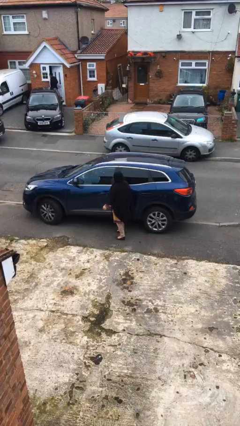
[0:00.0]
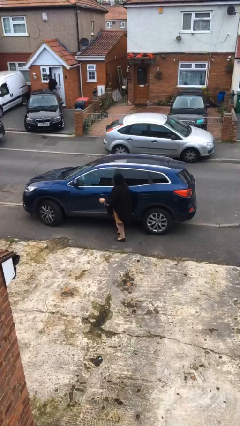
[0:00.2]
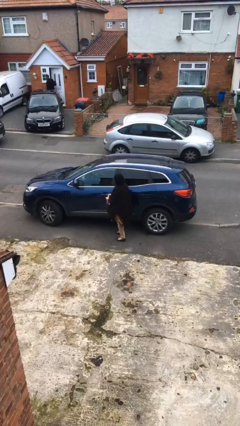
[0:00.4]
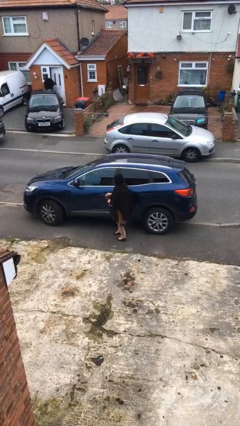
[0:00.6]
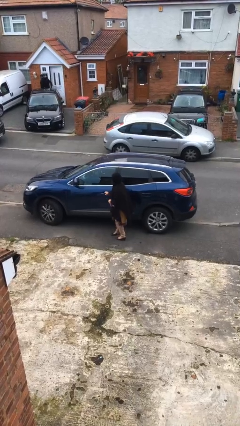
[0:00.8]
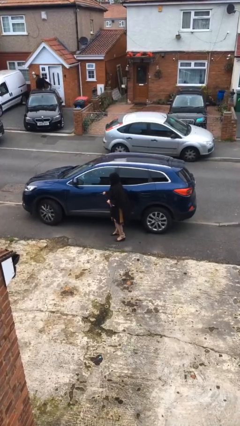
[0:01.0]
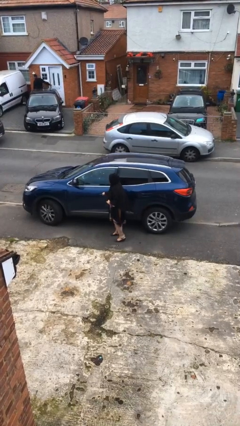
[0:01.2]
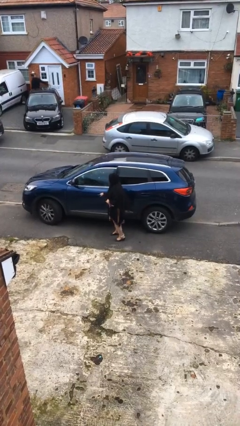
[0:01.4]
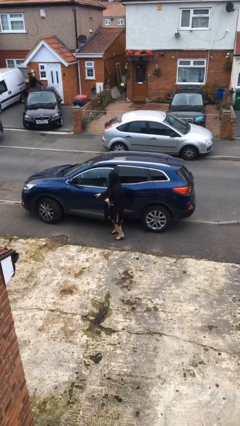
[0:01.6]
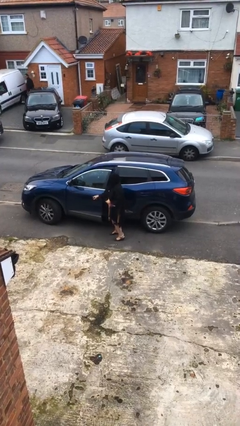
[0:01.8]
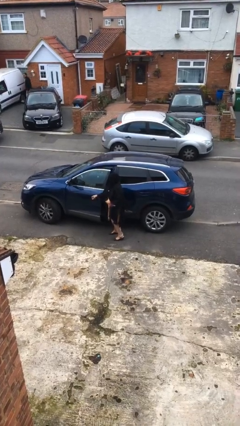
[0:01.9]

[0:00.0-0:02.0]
person opens car door

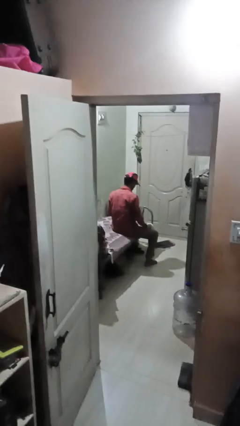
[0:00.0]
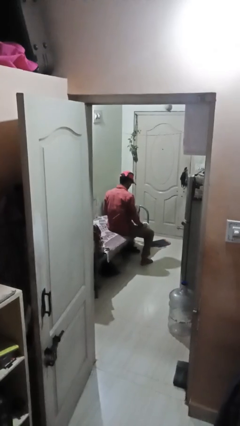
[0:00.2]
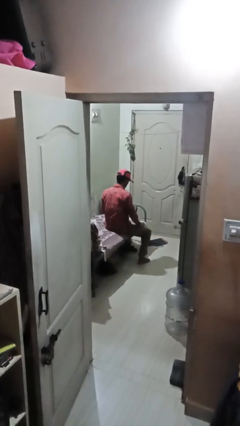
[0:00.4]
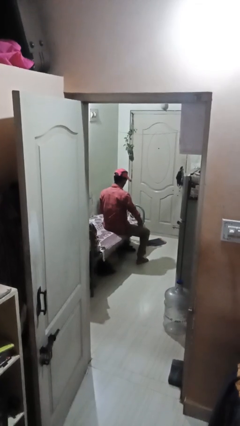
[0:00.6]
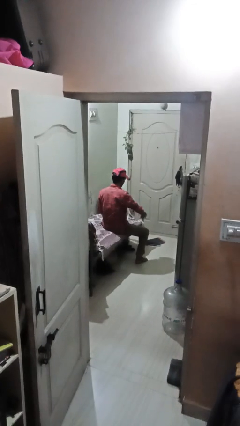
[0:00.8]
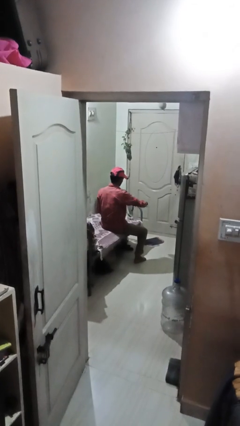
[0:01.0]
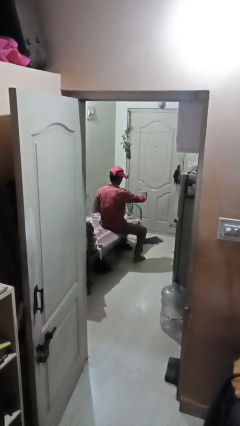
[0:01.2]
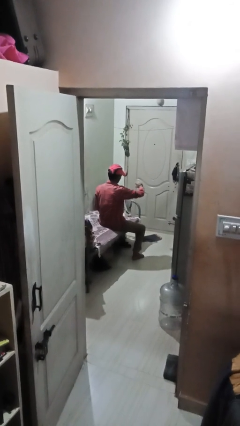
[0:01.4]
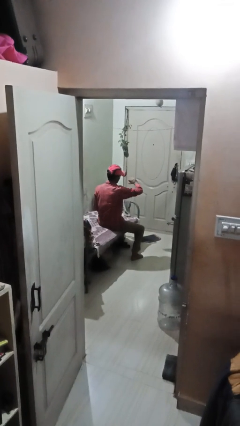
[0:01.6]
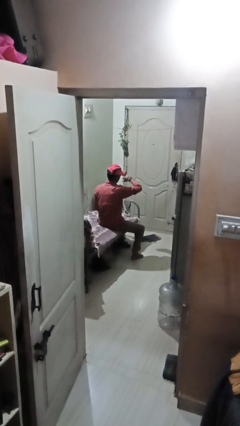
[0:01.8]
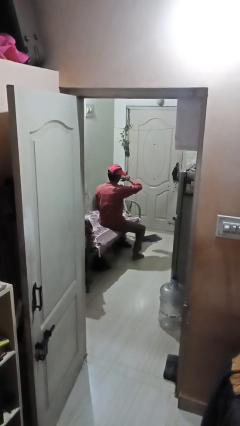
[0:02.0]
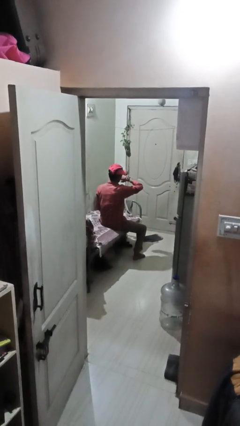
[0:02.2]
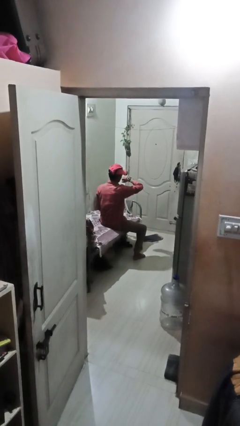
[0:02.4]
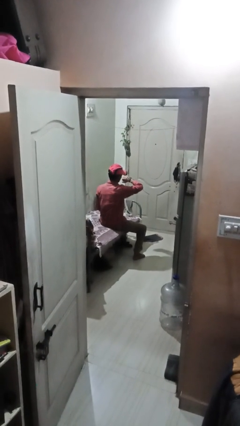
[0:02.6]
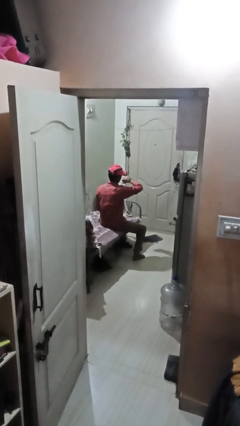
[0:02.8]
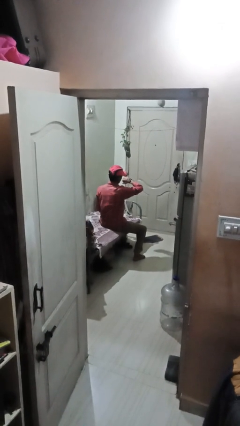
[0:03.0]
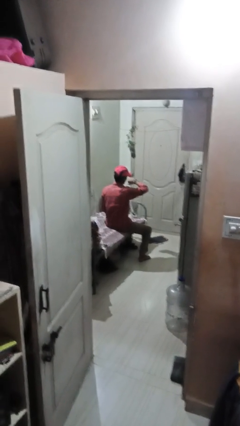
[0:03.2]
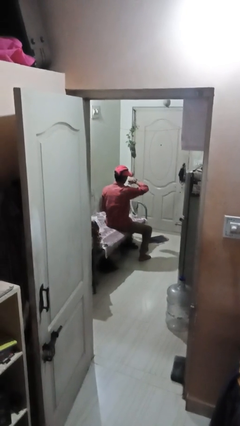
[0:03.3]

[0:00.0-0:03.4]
person looks at wristwatch

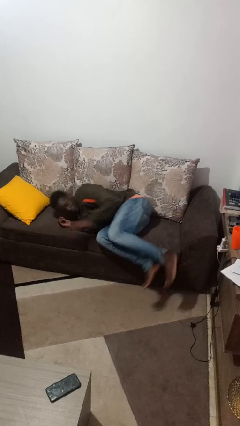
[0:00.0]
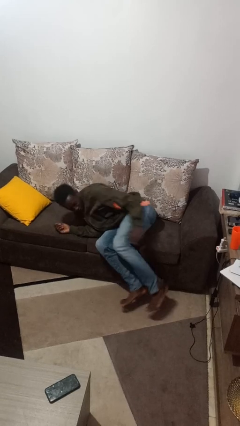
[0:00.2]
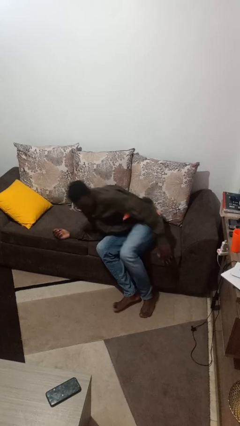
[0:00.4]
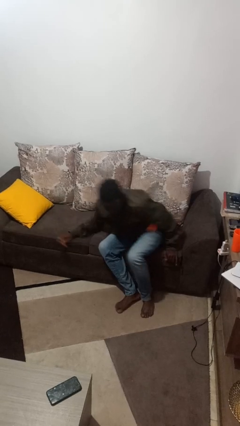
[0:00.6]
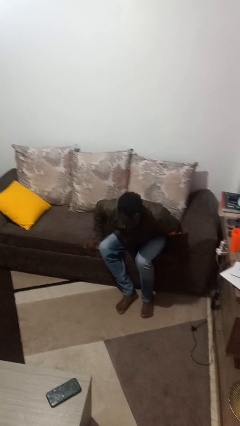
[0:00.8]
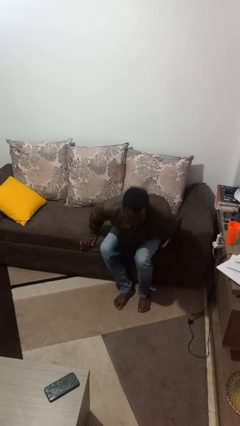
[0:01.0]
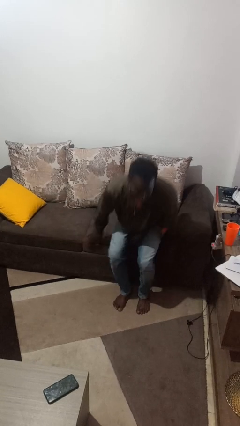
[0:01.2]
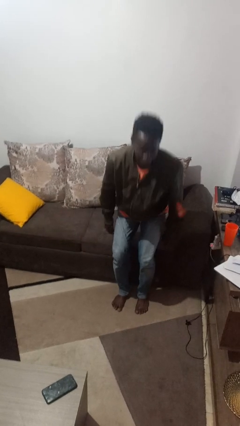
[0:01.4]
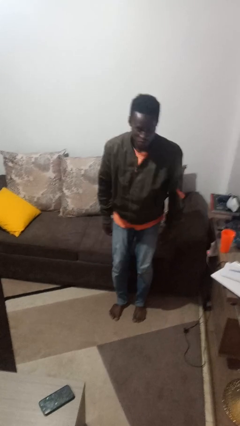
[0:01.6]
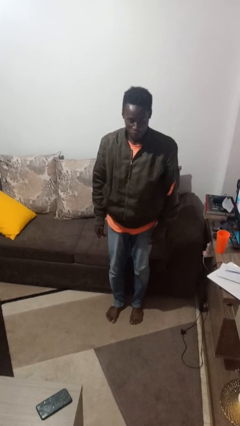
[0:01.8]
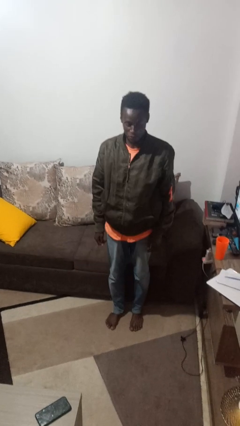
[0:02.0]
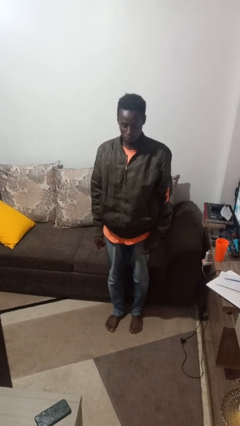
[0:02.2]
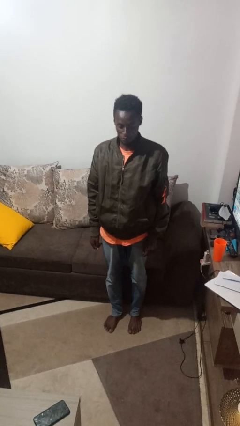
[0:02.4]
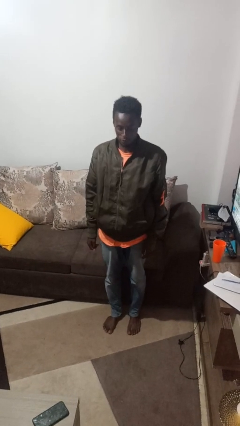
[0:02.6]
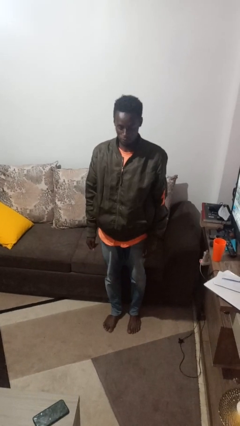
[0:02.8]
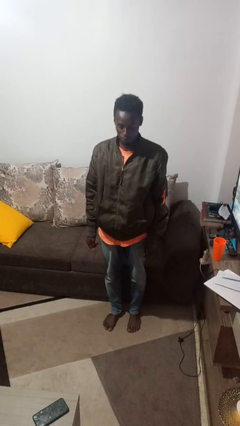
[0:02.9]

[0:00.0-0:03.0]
person stands up

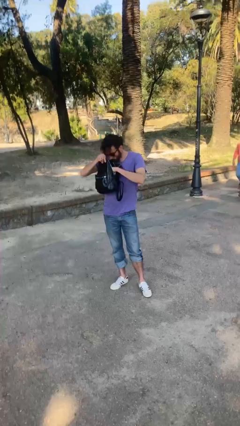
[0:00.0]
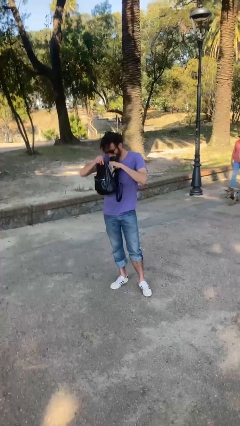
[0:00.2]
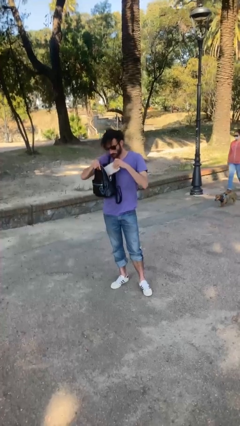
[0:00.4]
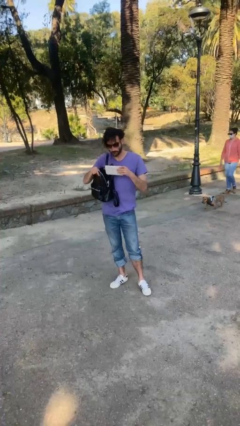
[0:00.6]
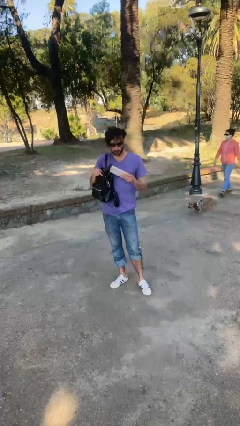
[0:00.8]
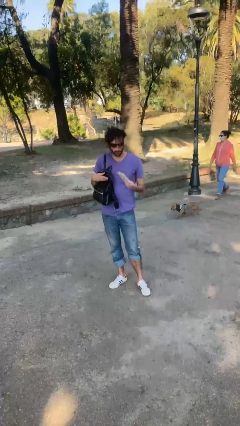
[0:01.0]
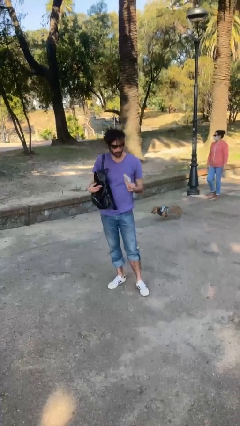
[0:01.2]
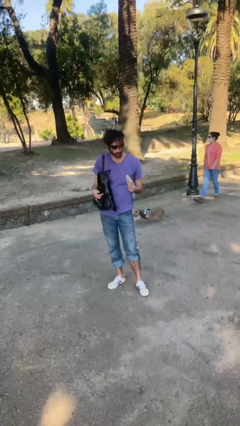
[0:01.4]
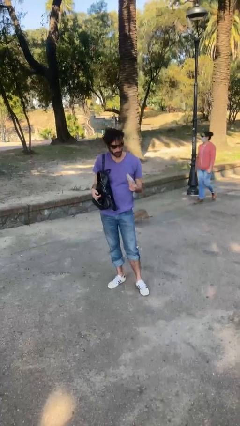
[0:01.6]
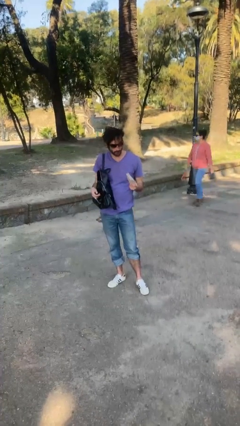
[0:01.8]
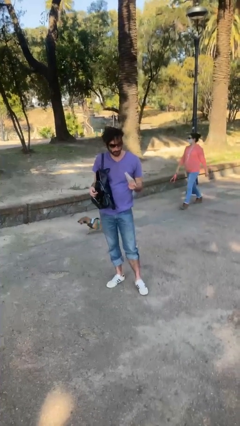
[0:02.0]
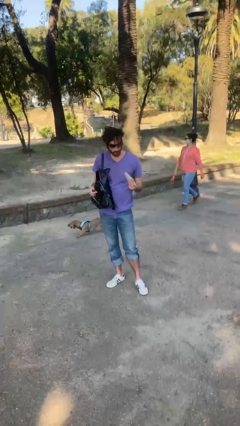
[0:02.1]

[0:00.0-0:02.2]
person takes object from purse

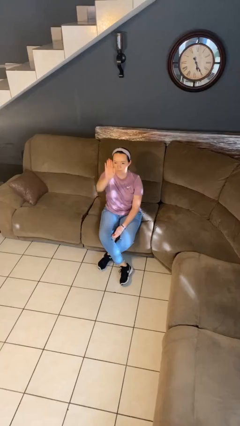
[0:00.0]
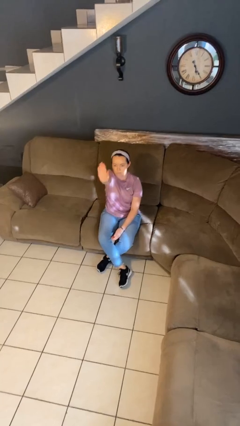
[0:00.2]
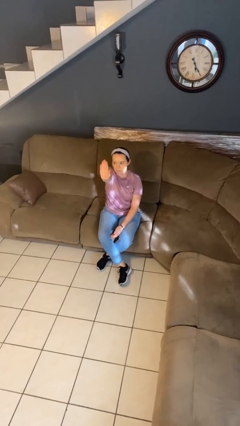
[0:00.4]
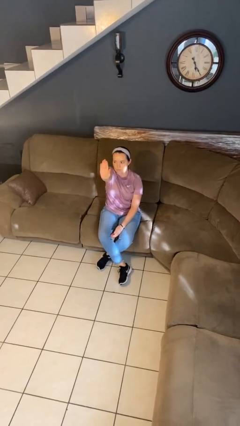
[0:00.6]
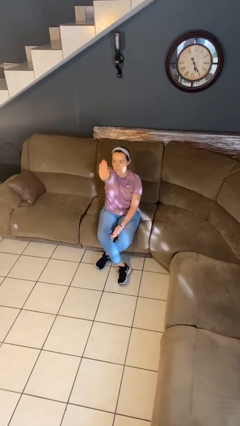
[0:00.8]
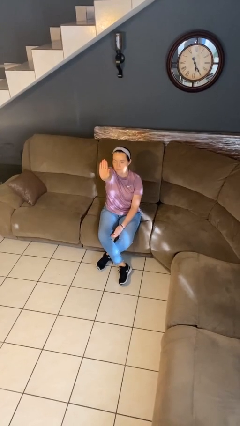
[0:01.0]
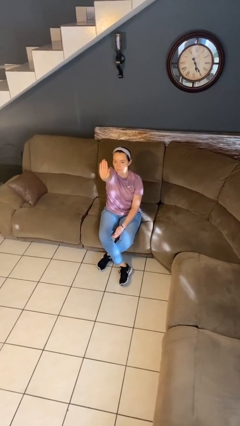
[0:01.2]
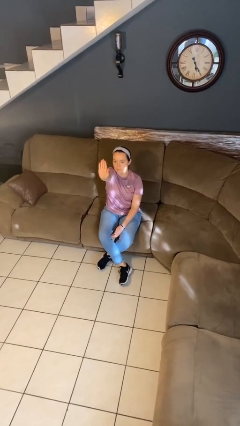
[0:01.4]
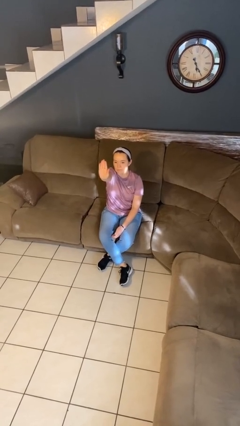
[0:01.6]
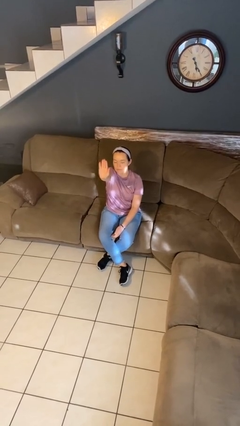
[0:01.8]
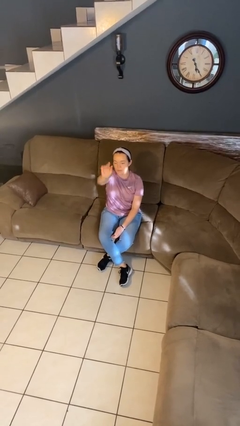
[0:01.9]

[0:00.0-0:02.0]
person gestures stop

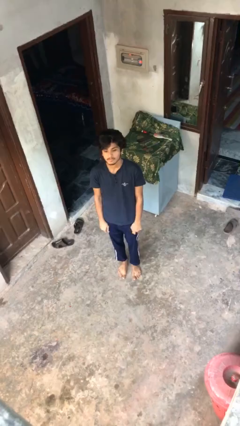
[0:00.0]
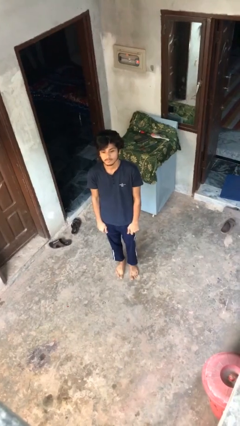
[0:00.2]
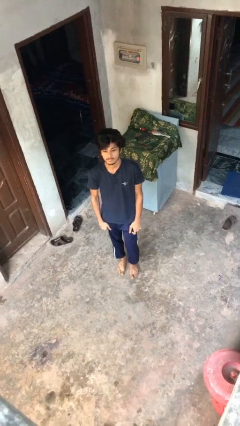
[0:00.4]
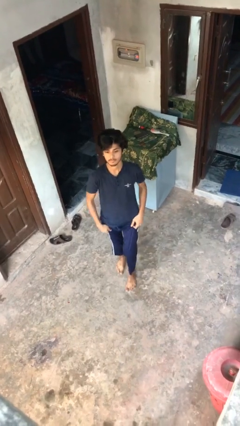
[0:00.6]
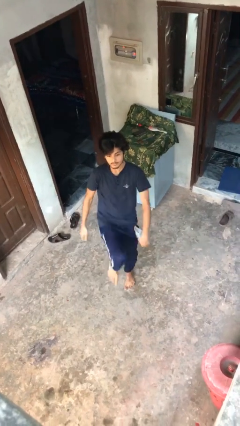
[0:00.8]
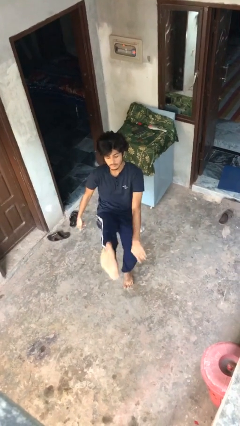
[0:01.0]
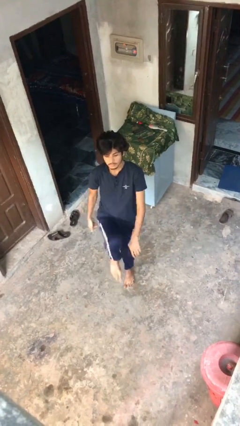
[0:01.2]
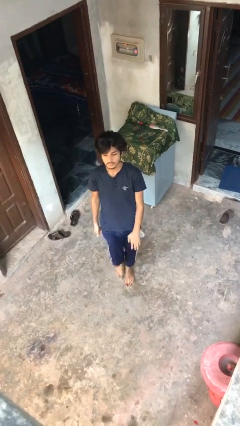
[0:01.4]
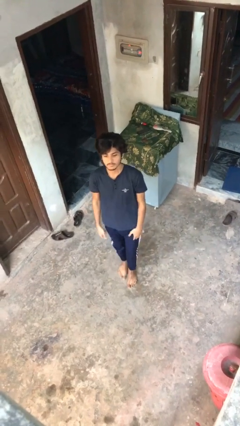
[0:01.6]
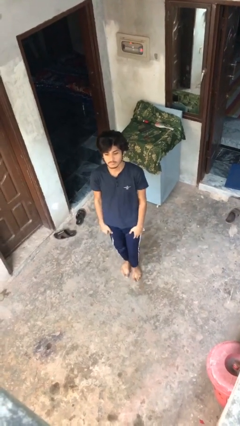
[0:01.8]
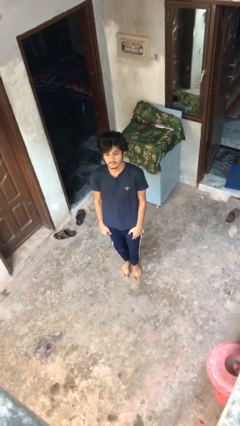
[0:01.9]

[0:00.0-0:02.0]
person karate kicks

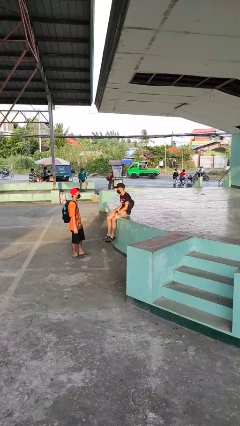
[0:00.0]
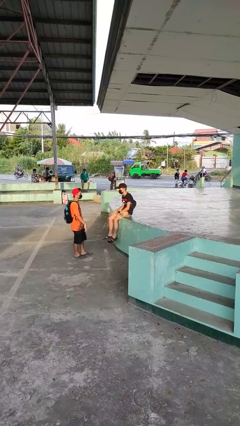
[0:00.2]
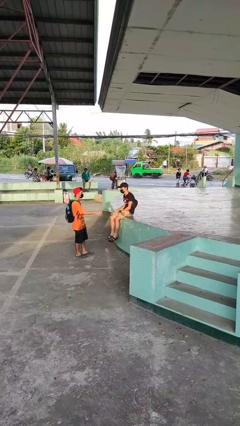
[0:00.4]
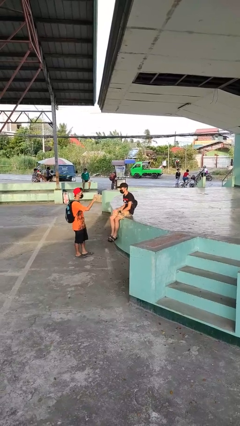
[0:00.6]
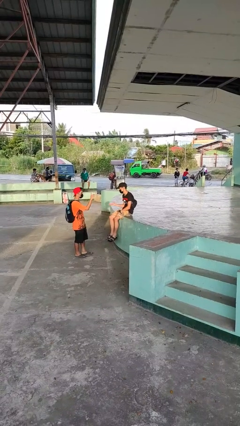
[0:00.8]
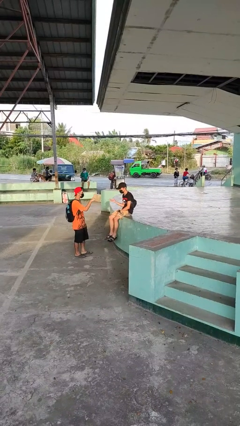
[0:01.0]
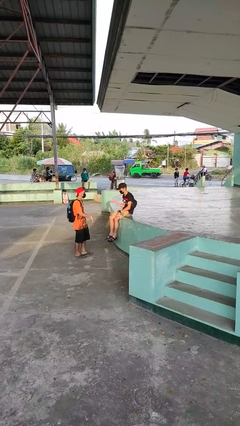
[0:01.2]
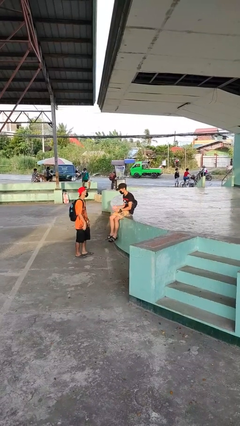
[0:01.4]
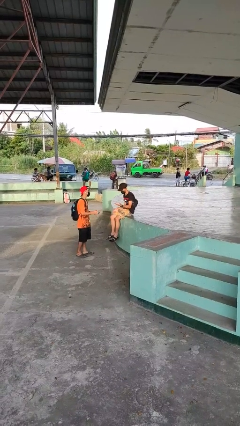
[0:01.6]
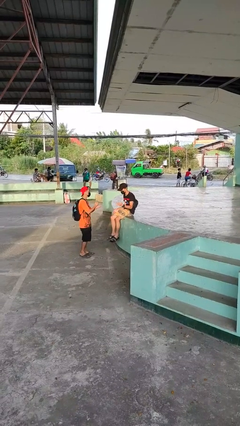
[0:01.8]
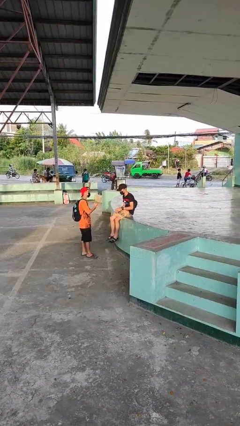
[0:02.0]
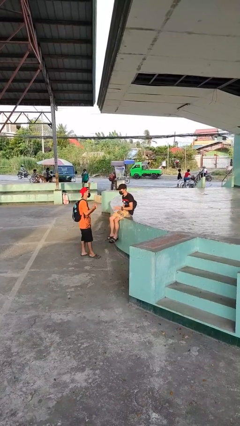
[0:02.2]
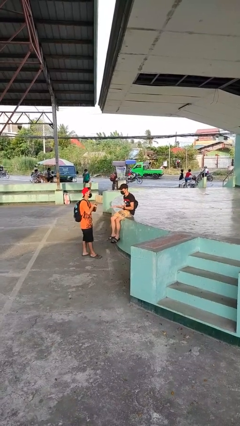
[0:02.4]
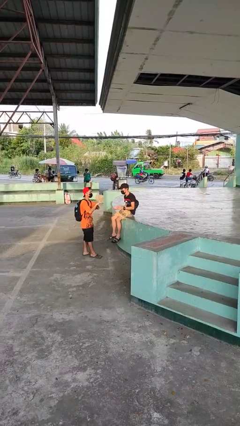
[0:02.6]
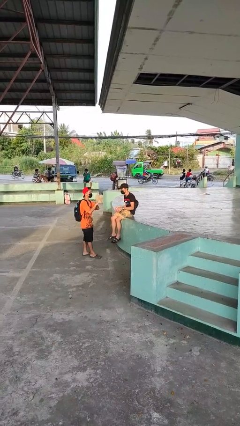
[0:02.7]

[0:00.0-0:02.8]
person talks to person
